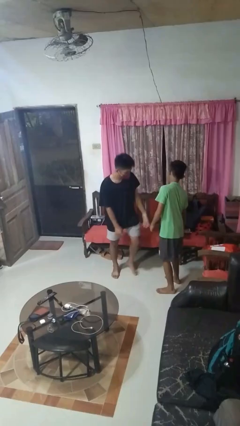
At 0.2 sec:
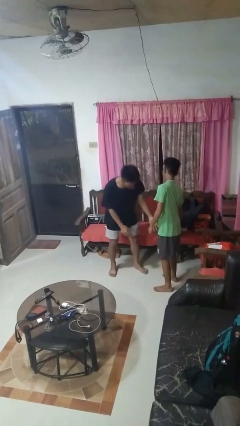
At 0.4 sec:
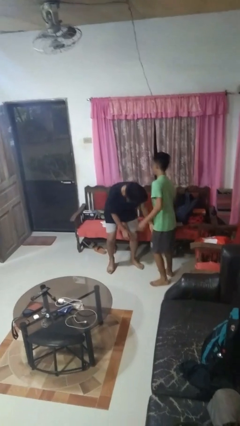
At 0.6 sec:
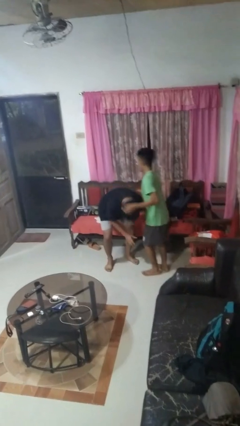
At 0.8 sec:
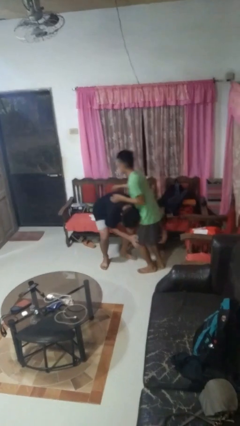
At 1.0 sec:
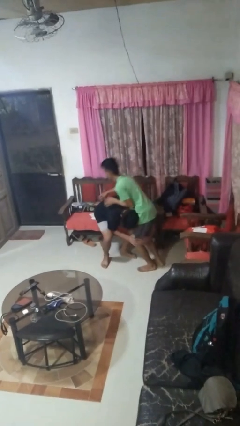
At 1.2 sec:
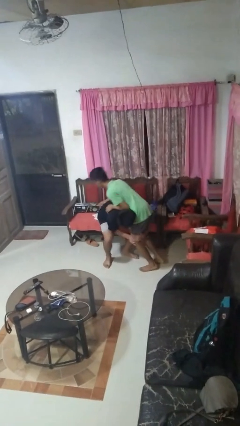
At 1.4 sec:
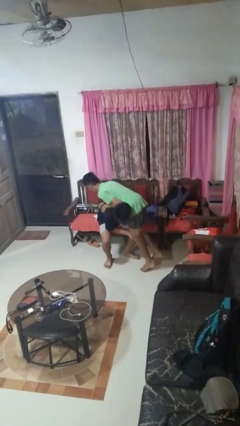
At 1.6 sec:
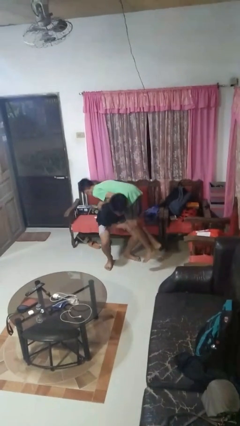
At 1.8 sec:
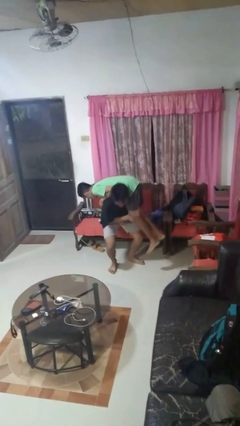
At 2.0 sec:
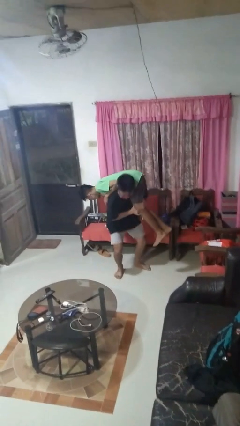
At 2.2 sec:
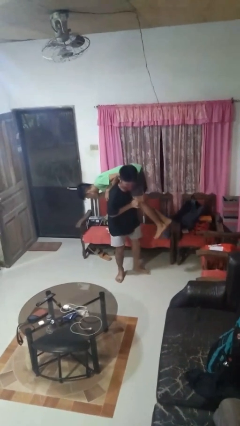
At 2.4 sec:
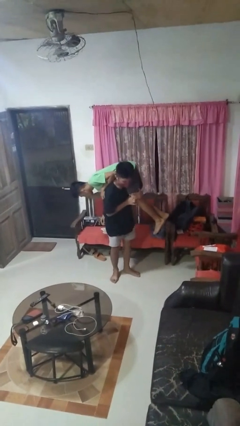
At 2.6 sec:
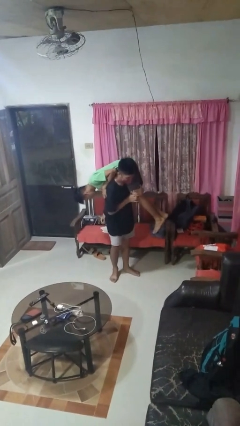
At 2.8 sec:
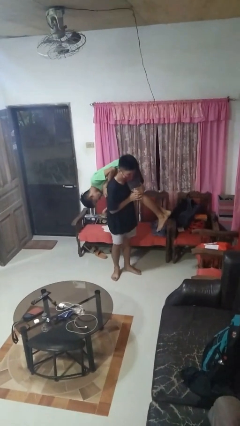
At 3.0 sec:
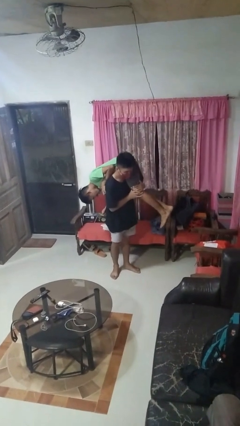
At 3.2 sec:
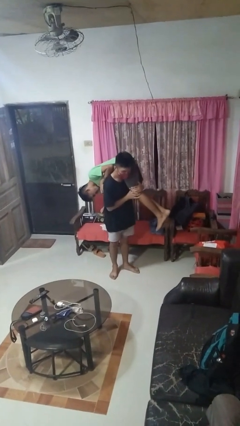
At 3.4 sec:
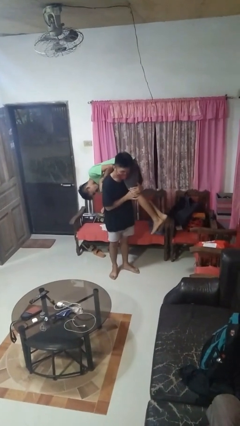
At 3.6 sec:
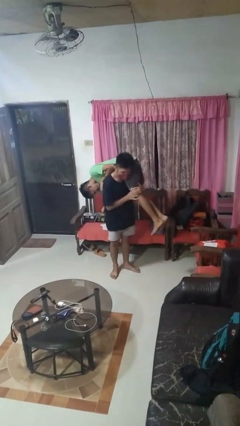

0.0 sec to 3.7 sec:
person carries person over shoulder

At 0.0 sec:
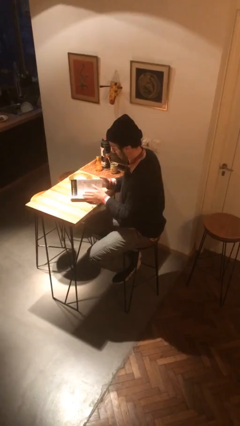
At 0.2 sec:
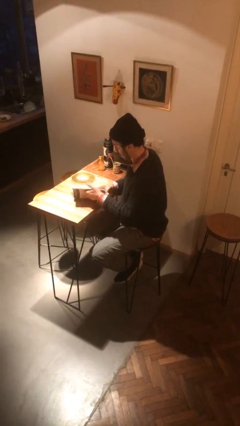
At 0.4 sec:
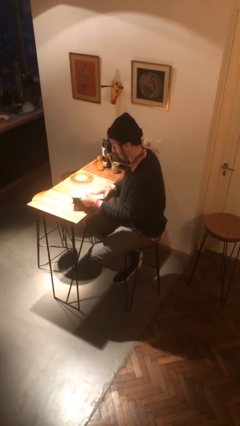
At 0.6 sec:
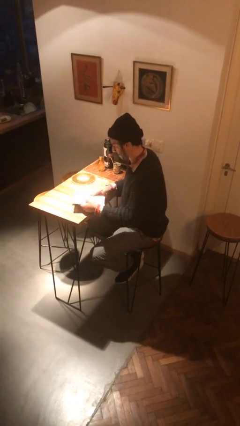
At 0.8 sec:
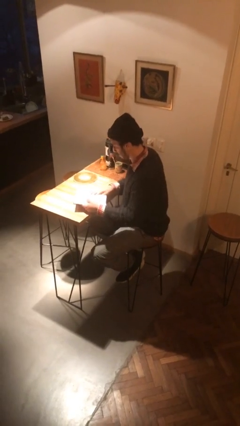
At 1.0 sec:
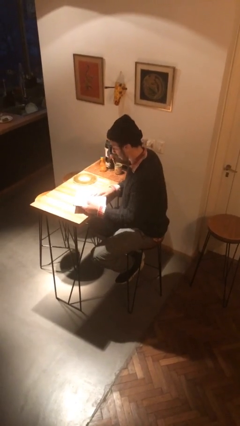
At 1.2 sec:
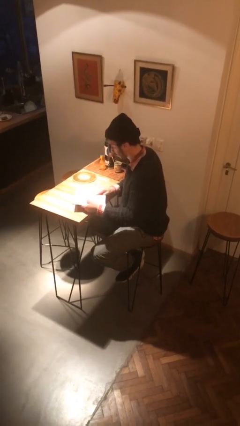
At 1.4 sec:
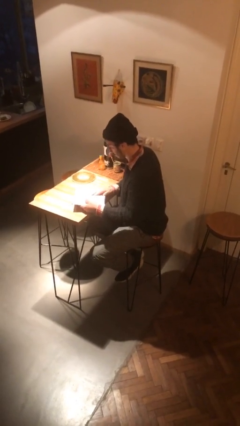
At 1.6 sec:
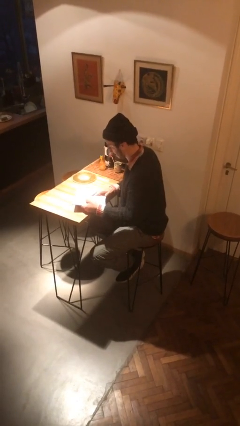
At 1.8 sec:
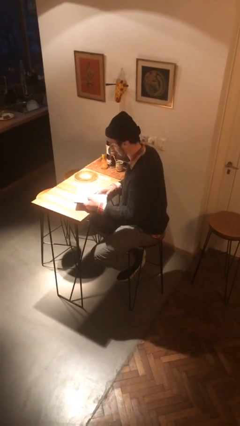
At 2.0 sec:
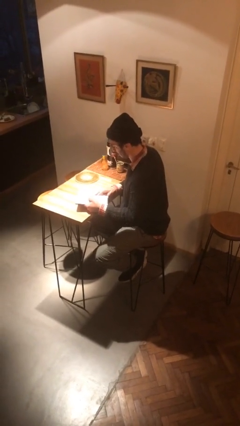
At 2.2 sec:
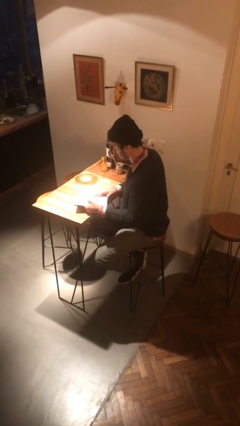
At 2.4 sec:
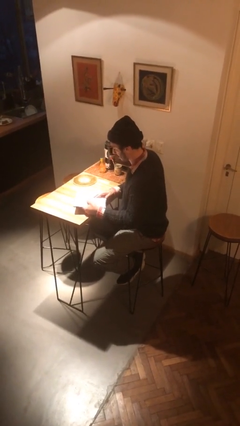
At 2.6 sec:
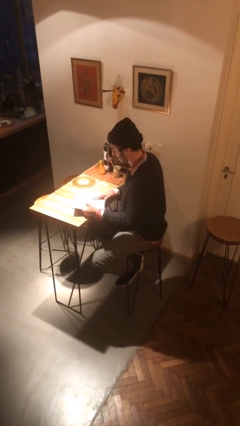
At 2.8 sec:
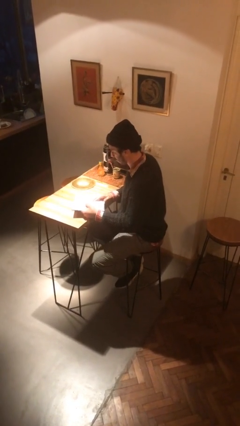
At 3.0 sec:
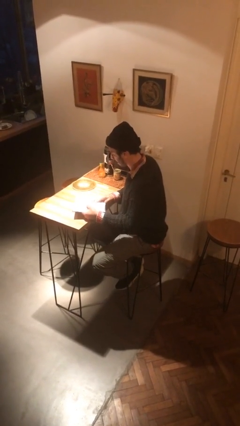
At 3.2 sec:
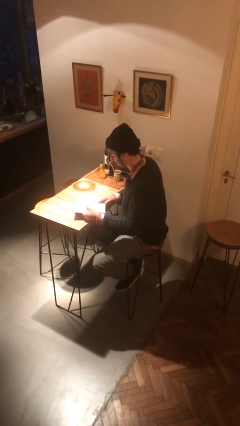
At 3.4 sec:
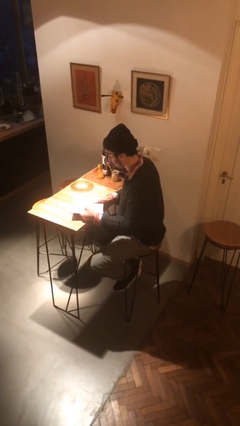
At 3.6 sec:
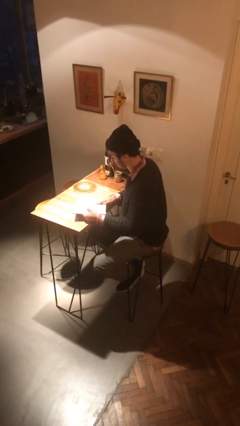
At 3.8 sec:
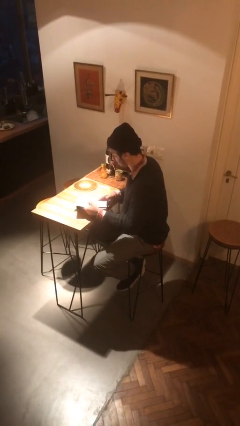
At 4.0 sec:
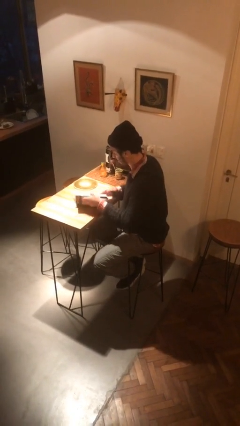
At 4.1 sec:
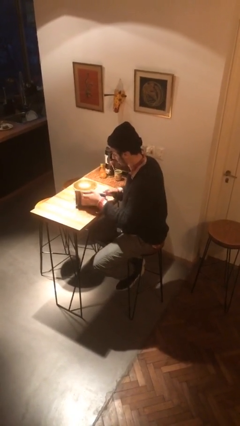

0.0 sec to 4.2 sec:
person reads book

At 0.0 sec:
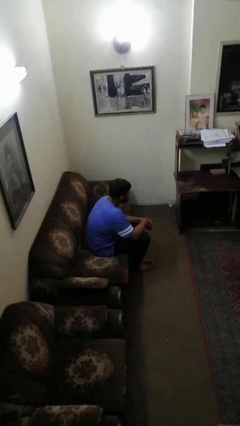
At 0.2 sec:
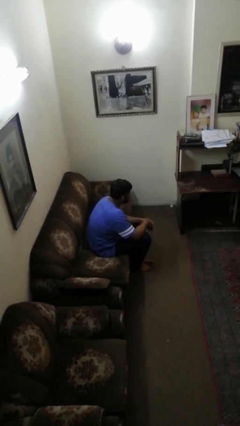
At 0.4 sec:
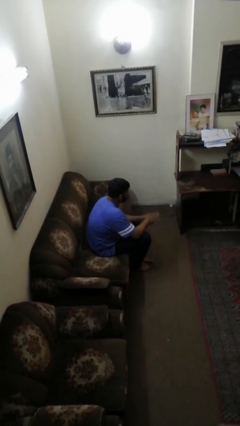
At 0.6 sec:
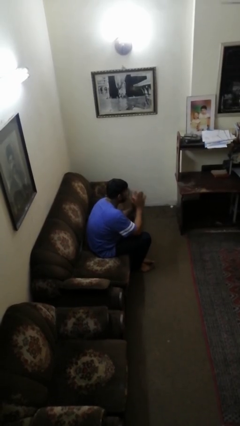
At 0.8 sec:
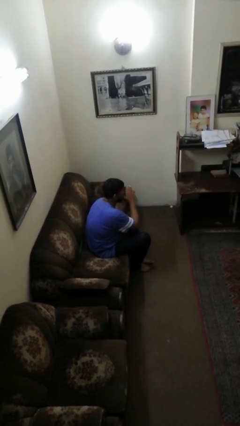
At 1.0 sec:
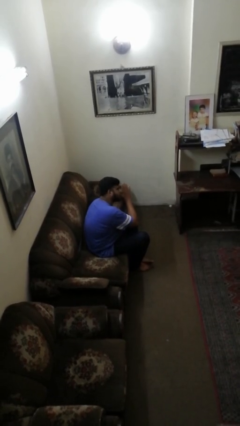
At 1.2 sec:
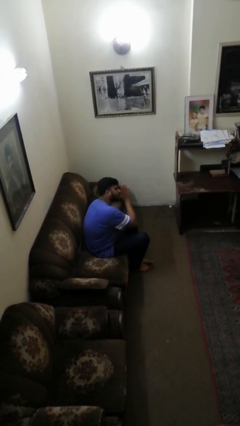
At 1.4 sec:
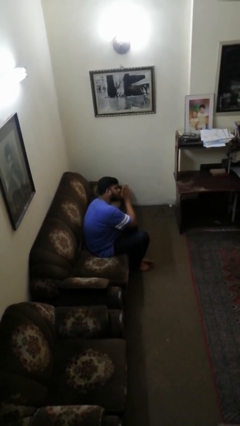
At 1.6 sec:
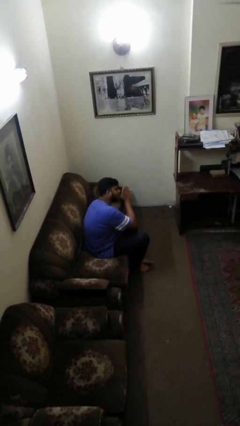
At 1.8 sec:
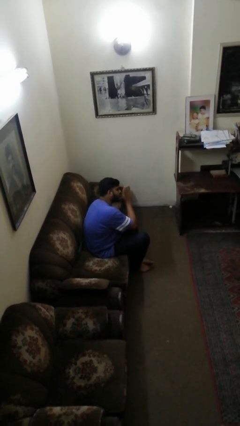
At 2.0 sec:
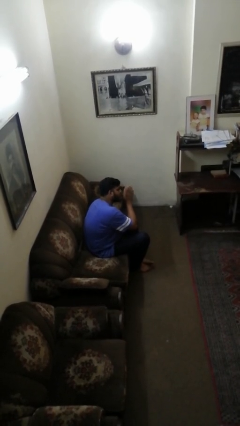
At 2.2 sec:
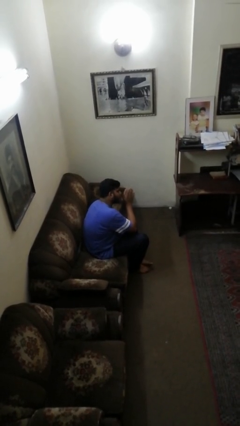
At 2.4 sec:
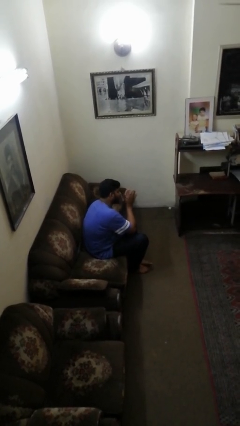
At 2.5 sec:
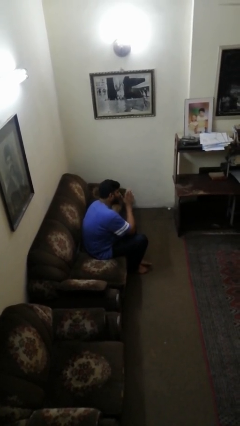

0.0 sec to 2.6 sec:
person claps hands

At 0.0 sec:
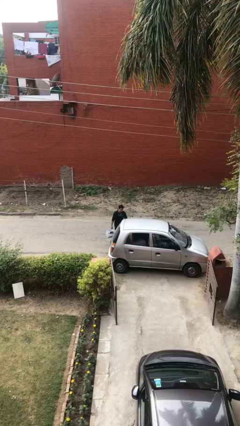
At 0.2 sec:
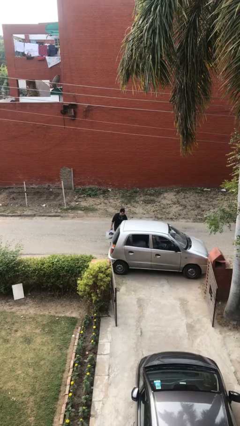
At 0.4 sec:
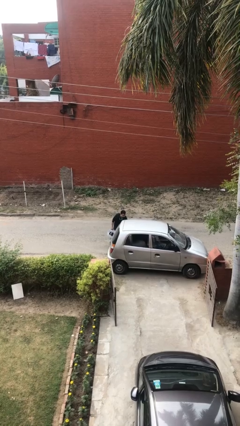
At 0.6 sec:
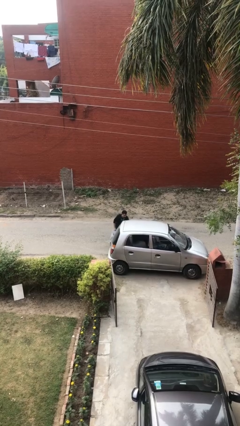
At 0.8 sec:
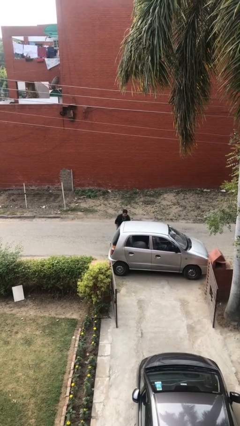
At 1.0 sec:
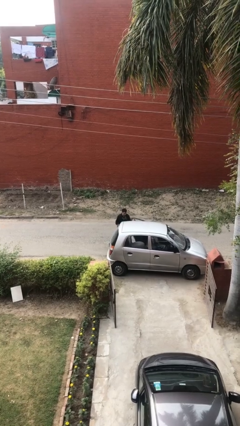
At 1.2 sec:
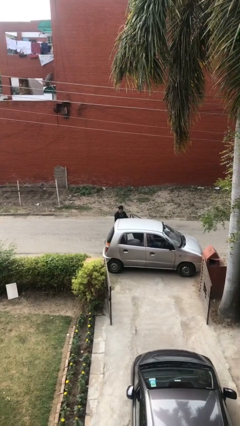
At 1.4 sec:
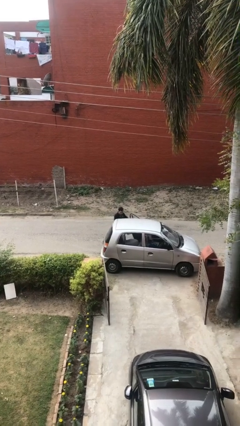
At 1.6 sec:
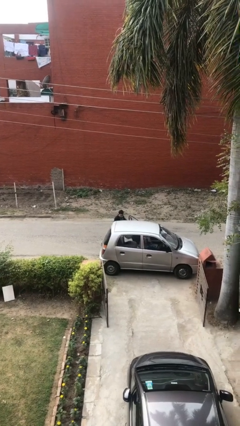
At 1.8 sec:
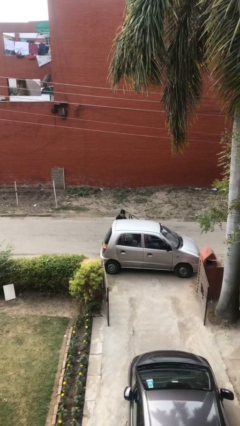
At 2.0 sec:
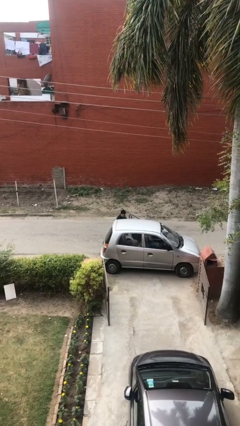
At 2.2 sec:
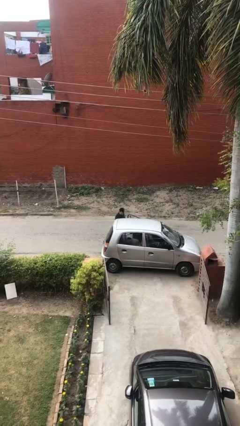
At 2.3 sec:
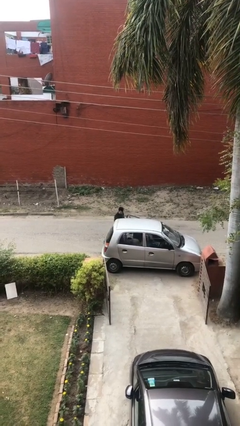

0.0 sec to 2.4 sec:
person loads car

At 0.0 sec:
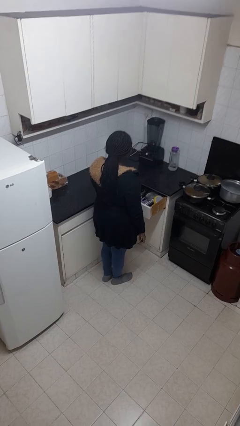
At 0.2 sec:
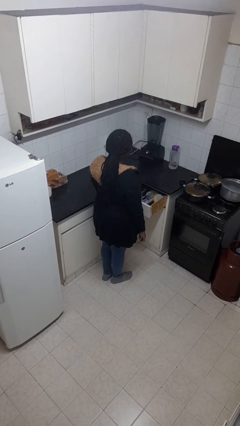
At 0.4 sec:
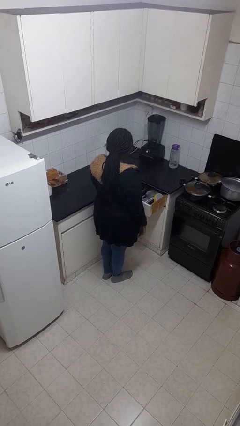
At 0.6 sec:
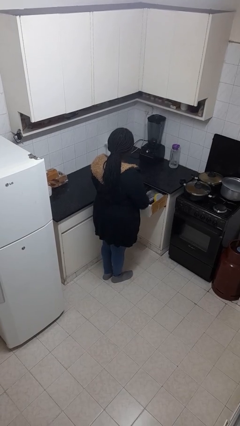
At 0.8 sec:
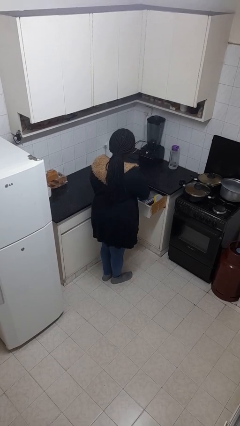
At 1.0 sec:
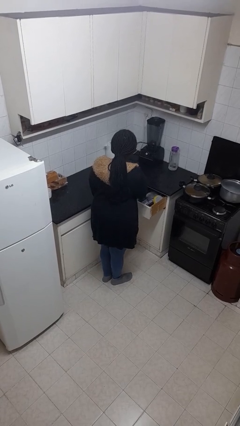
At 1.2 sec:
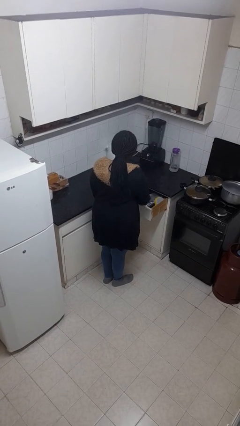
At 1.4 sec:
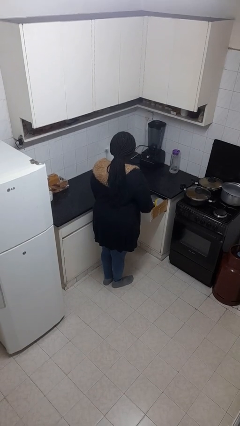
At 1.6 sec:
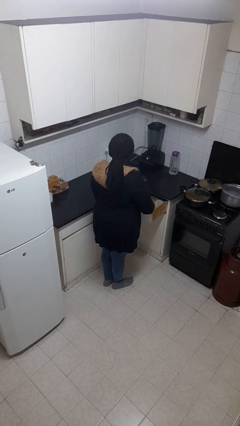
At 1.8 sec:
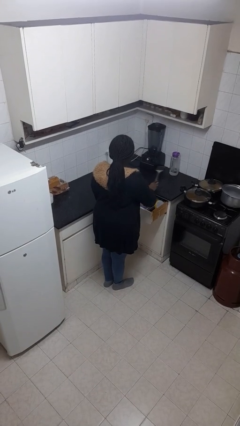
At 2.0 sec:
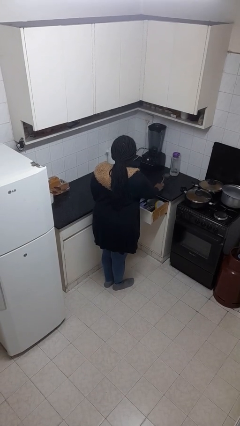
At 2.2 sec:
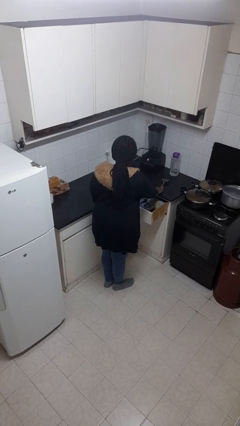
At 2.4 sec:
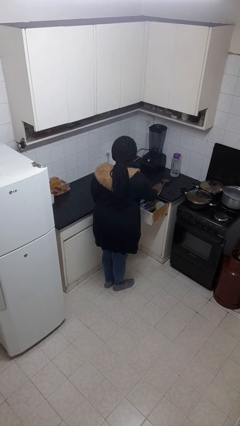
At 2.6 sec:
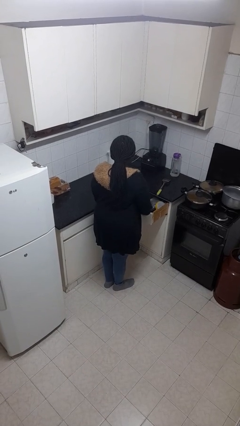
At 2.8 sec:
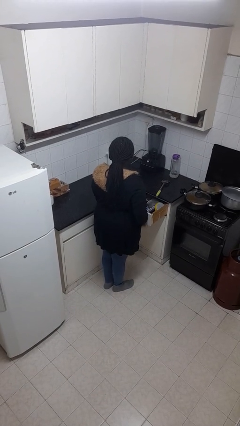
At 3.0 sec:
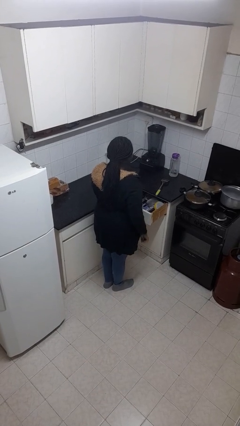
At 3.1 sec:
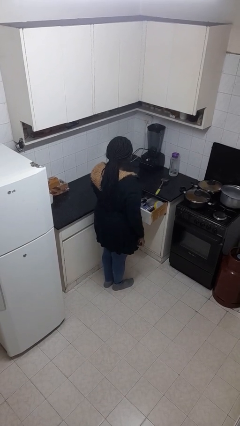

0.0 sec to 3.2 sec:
person takes object from kitchen drawer

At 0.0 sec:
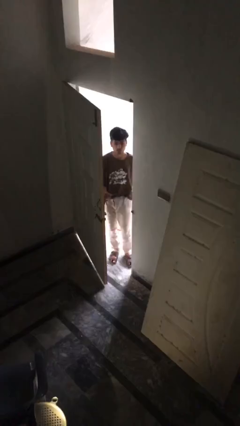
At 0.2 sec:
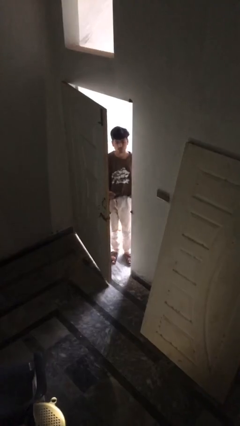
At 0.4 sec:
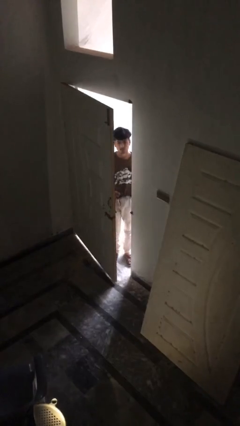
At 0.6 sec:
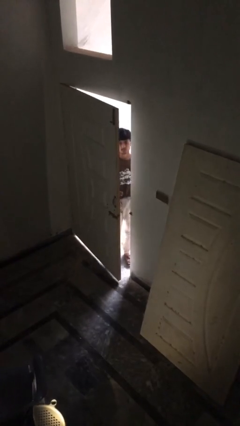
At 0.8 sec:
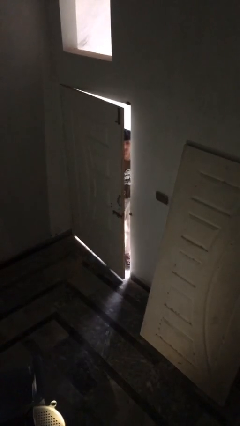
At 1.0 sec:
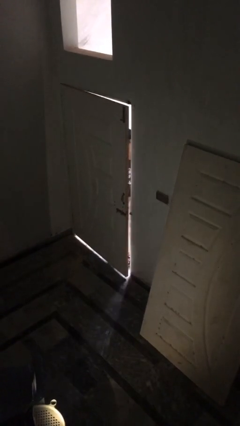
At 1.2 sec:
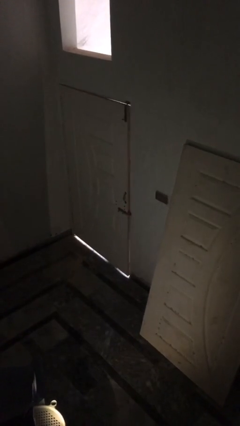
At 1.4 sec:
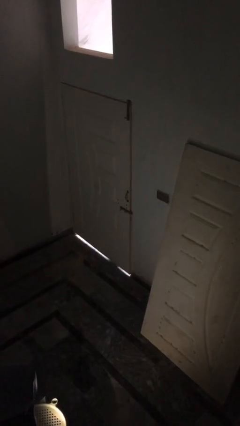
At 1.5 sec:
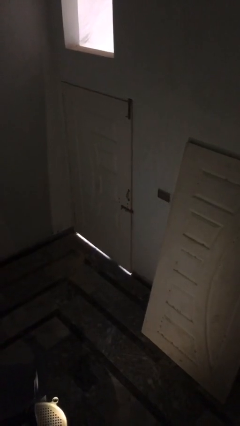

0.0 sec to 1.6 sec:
person closes facility door
